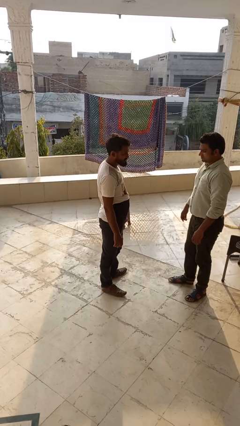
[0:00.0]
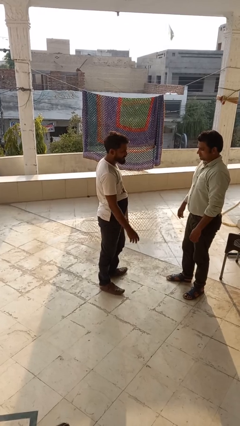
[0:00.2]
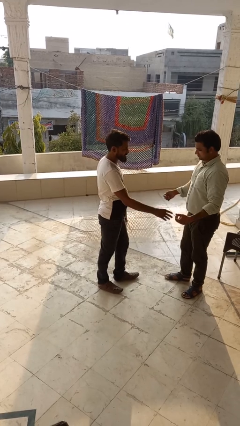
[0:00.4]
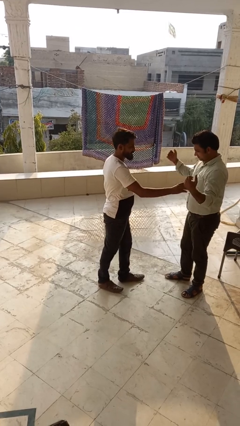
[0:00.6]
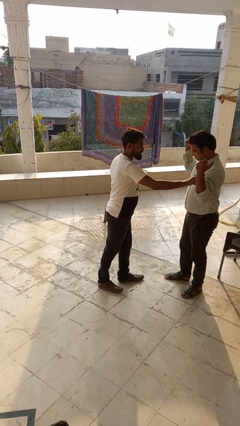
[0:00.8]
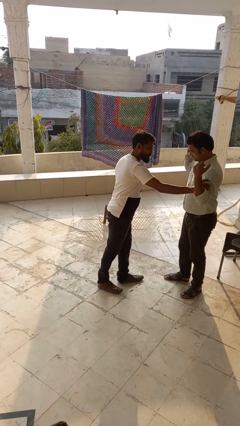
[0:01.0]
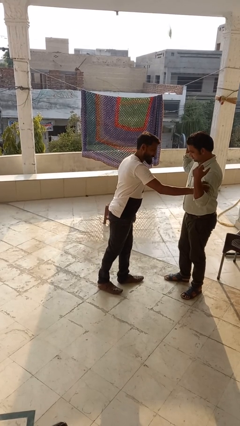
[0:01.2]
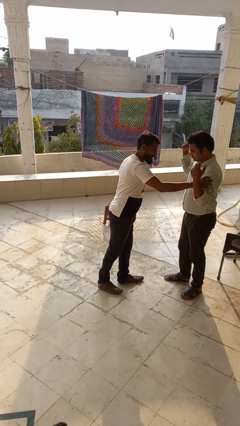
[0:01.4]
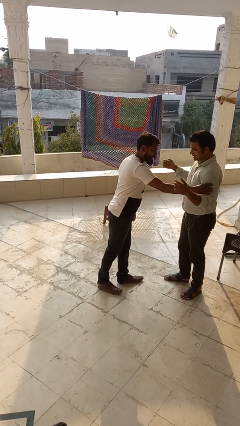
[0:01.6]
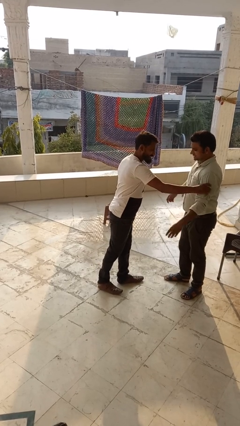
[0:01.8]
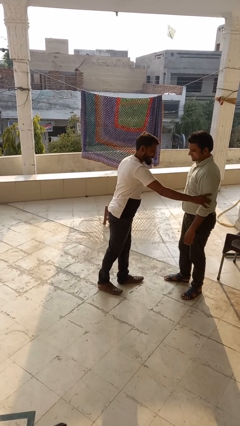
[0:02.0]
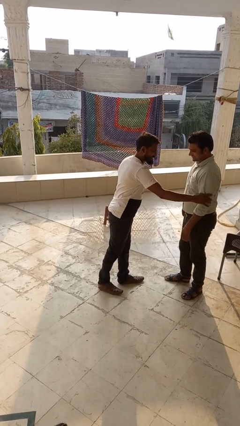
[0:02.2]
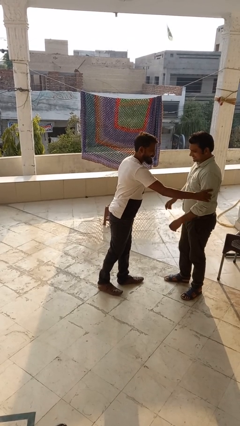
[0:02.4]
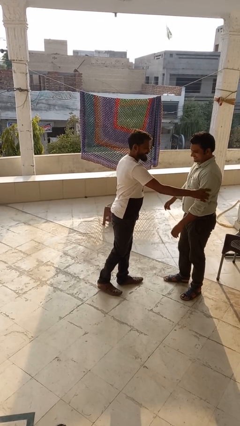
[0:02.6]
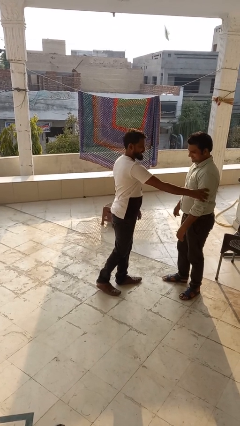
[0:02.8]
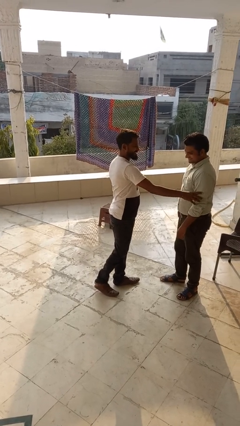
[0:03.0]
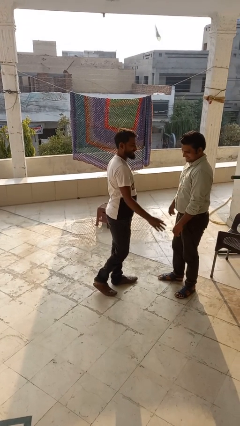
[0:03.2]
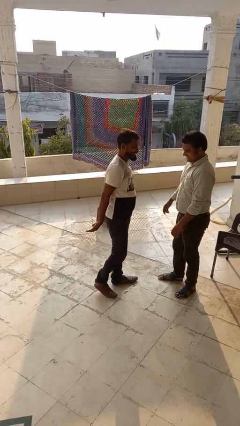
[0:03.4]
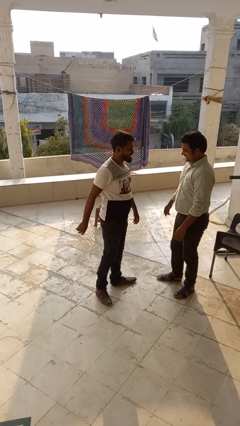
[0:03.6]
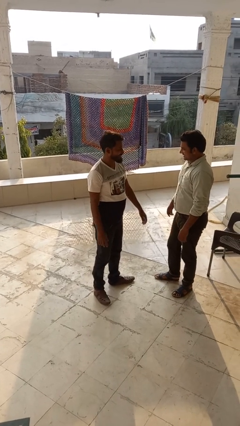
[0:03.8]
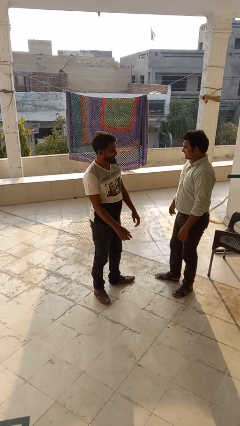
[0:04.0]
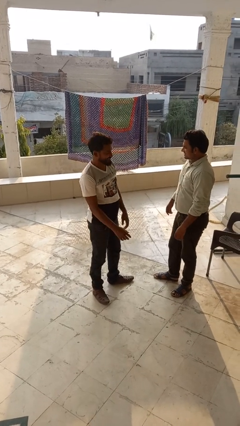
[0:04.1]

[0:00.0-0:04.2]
person grabs person by bicep

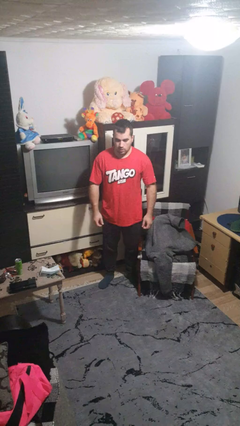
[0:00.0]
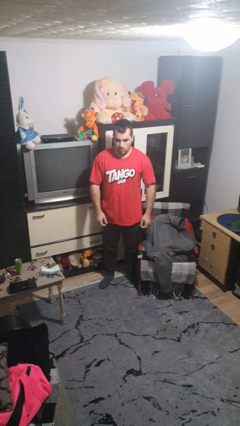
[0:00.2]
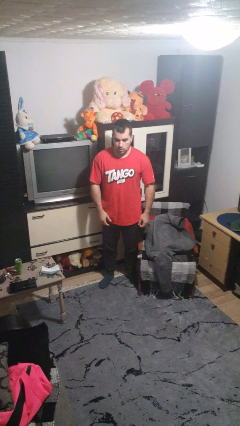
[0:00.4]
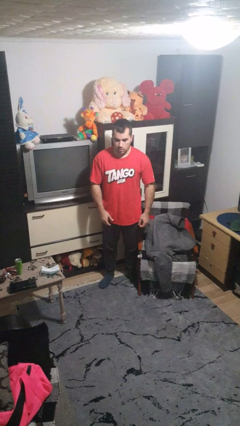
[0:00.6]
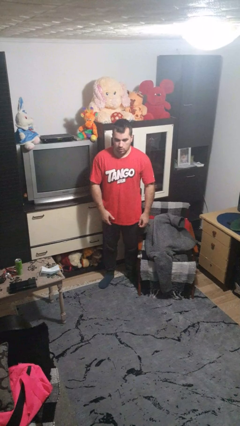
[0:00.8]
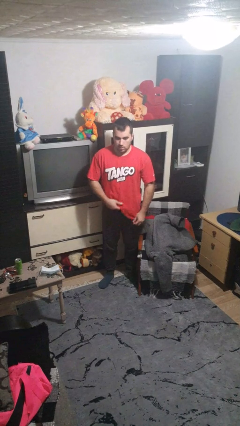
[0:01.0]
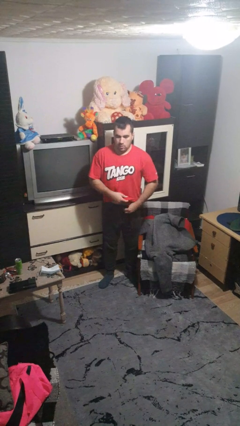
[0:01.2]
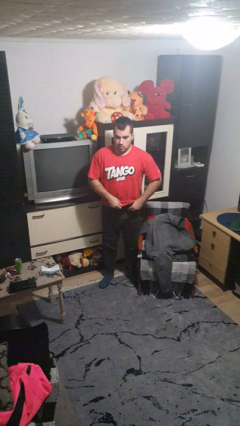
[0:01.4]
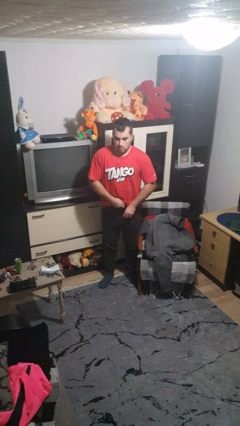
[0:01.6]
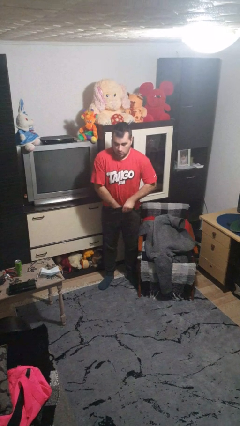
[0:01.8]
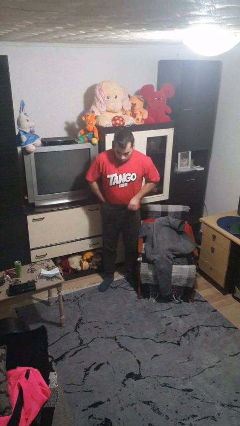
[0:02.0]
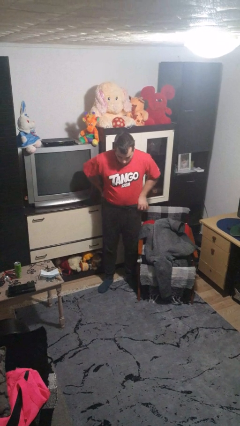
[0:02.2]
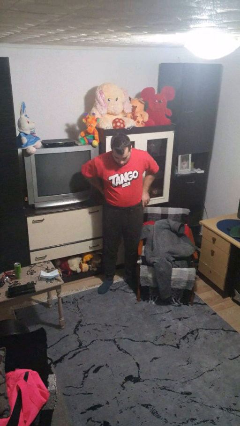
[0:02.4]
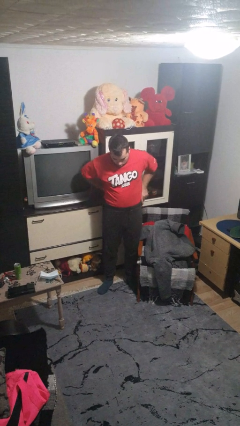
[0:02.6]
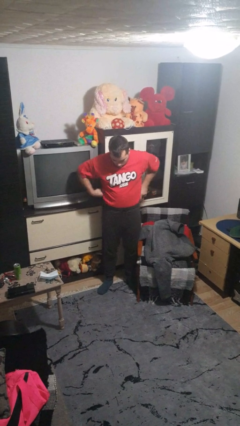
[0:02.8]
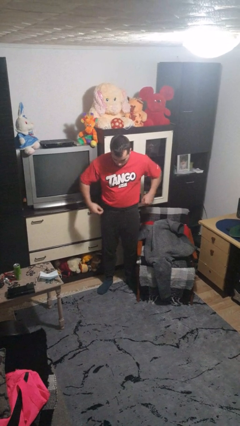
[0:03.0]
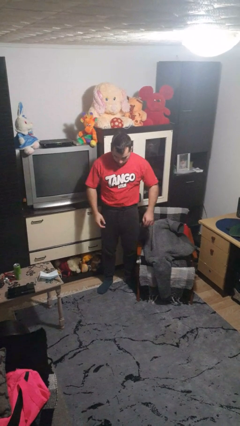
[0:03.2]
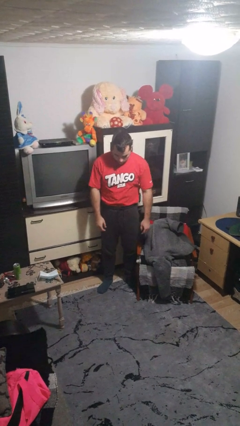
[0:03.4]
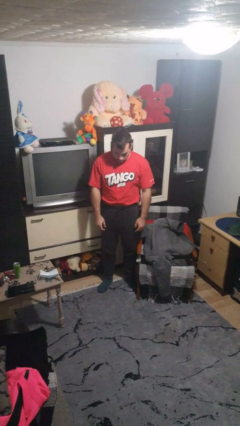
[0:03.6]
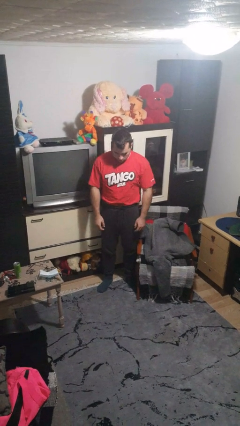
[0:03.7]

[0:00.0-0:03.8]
person tucks in shirt

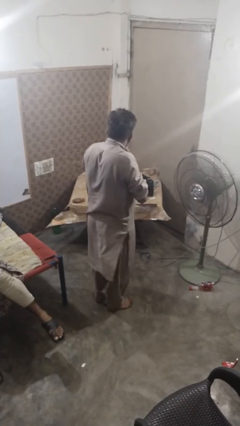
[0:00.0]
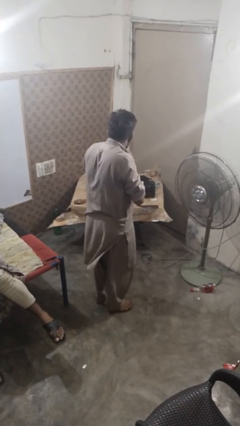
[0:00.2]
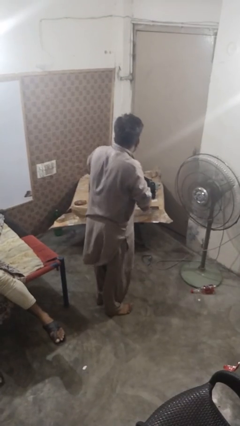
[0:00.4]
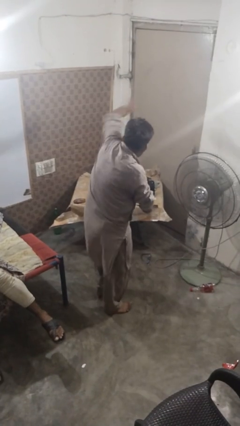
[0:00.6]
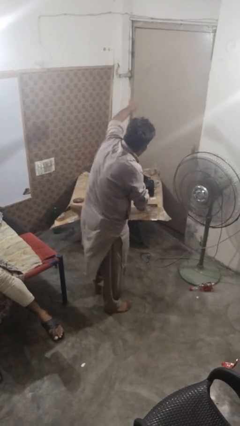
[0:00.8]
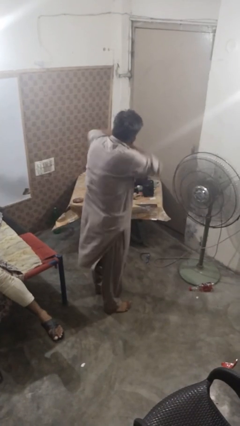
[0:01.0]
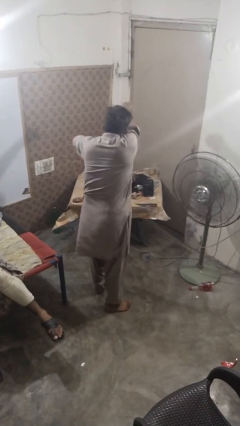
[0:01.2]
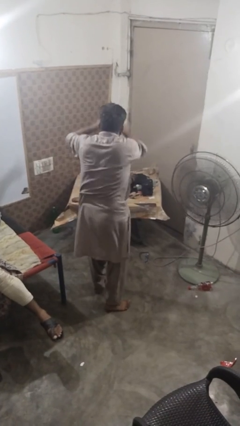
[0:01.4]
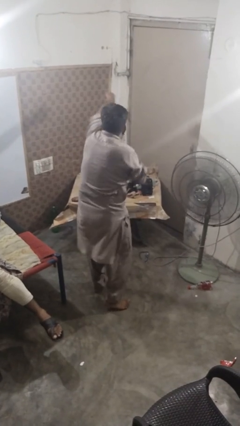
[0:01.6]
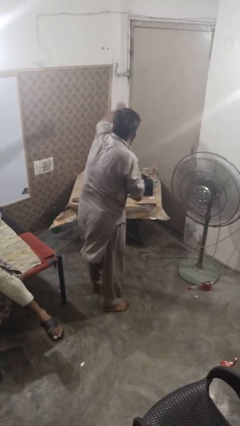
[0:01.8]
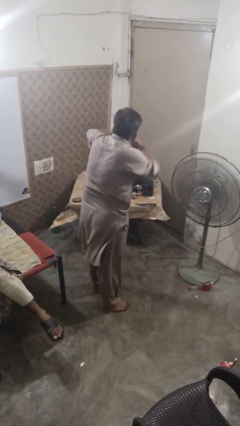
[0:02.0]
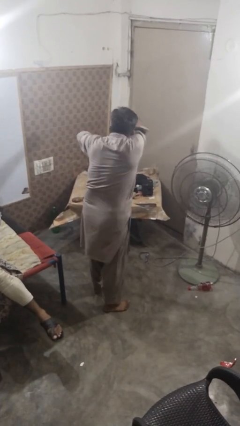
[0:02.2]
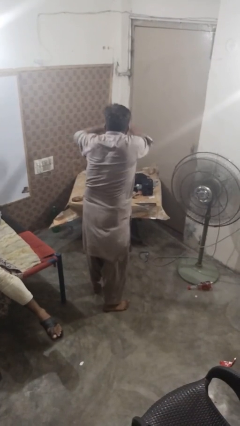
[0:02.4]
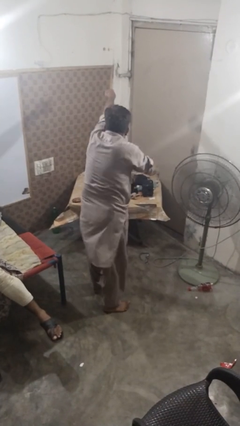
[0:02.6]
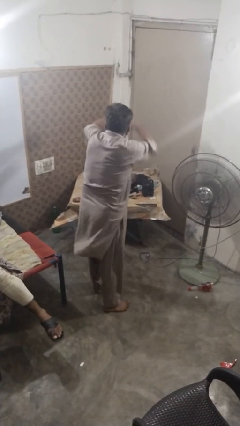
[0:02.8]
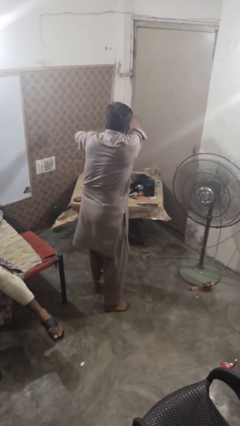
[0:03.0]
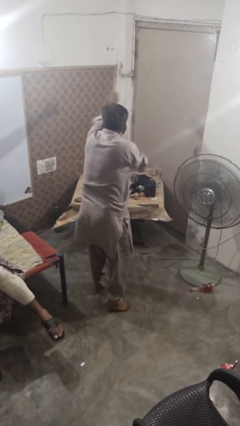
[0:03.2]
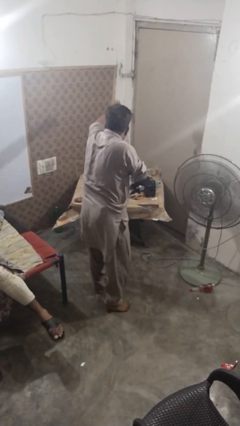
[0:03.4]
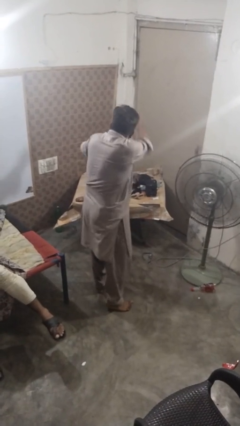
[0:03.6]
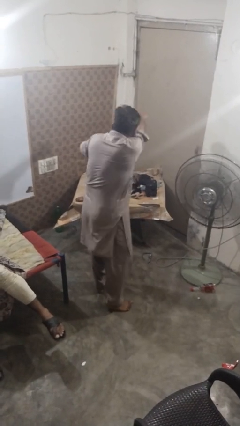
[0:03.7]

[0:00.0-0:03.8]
person punches

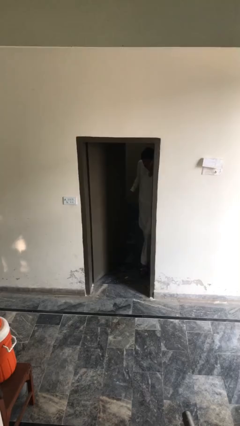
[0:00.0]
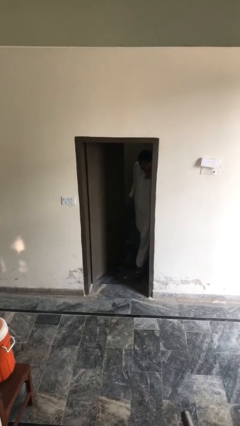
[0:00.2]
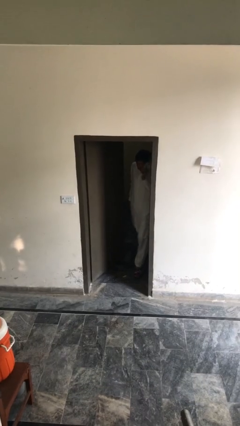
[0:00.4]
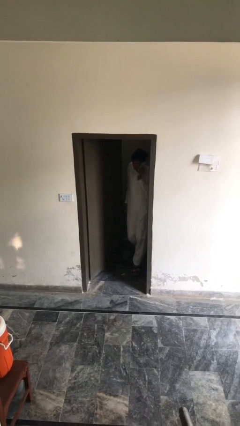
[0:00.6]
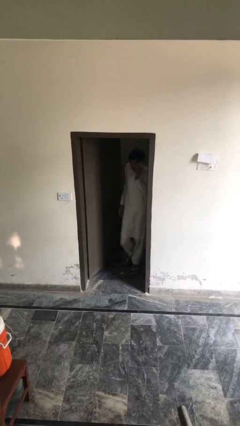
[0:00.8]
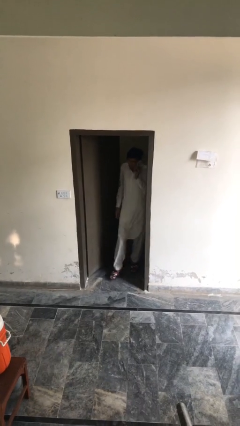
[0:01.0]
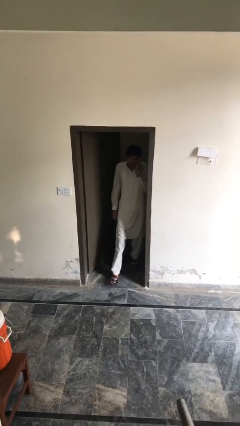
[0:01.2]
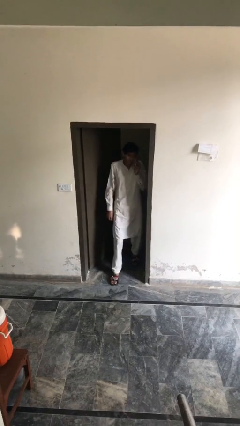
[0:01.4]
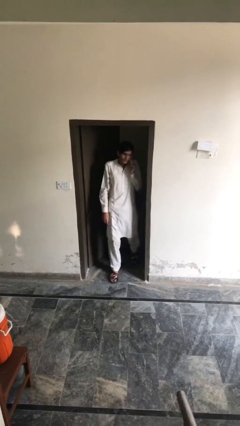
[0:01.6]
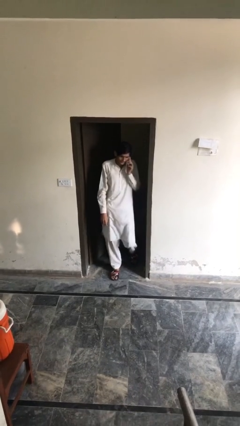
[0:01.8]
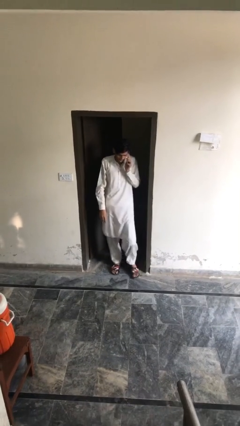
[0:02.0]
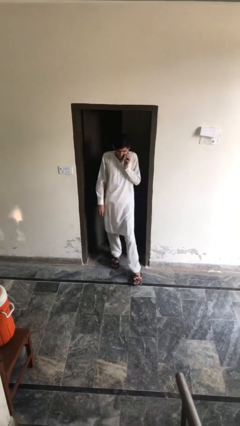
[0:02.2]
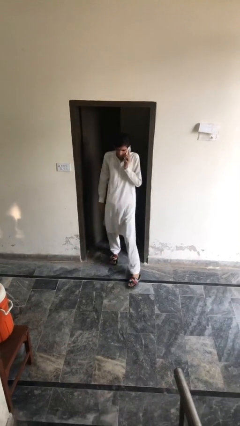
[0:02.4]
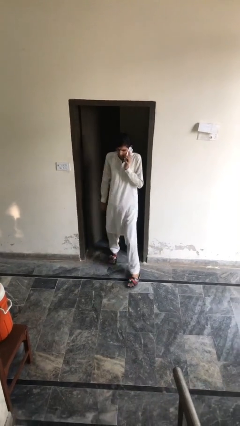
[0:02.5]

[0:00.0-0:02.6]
person enters scene through structure

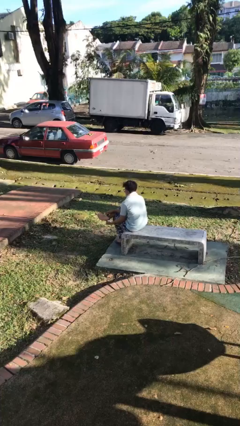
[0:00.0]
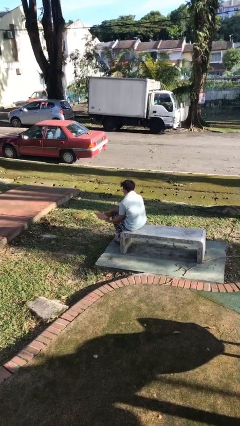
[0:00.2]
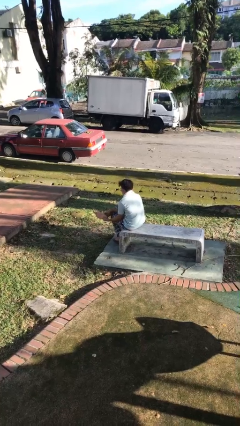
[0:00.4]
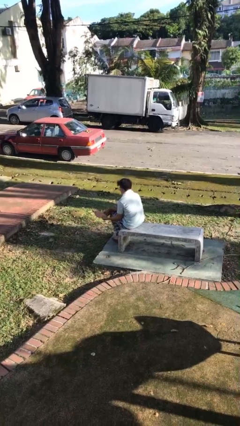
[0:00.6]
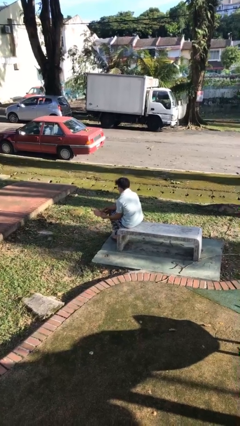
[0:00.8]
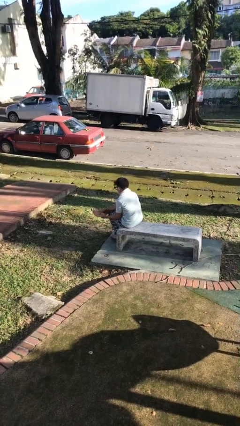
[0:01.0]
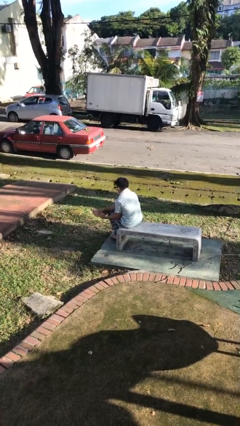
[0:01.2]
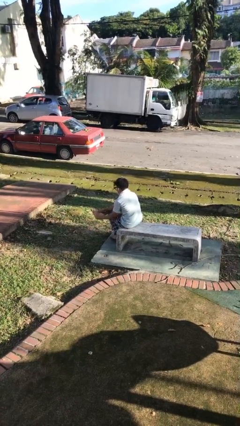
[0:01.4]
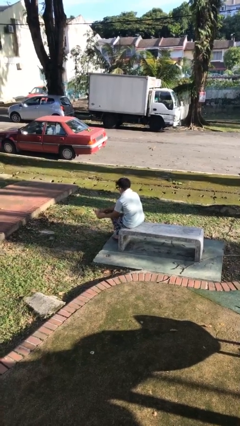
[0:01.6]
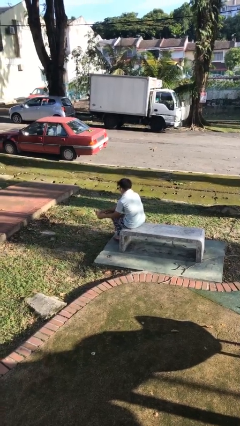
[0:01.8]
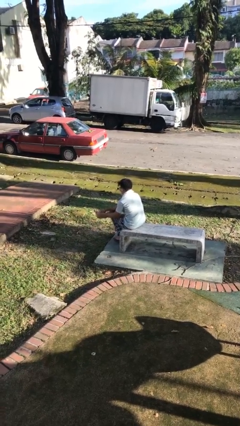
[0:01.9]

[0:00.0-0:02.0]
person rubs foot

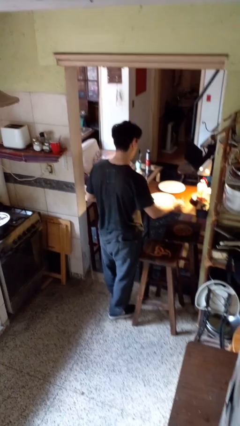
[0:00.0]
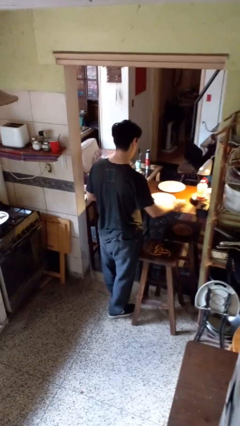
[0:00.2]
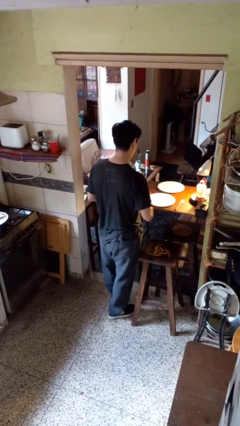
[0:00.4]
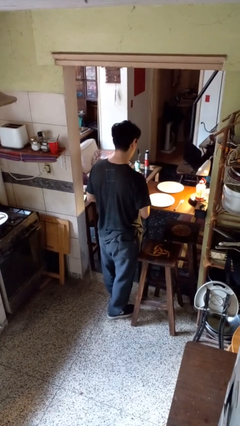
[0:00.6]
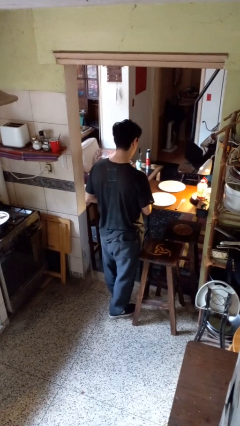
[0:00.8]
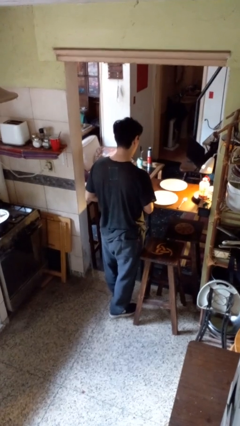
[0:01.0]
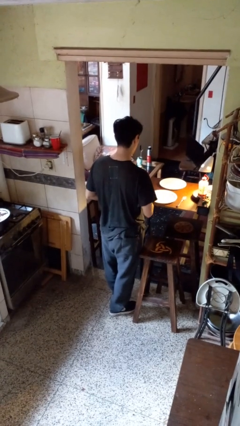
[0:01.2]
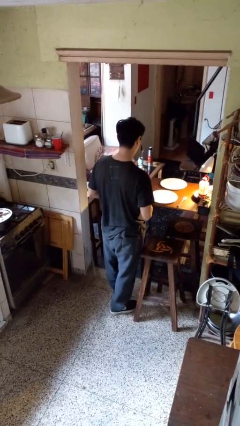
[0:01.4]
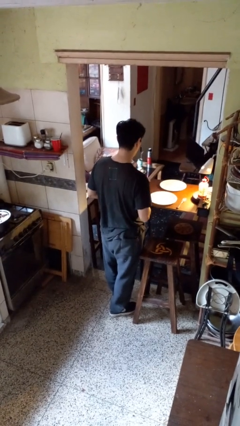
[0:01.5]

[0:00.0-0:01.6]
person sets table
